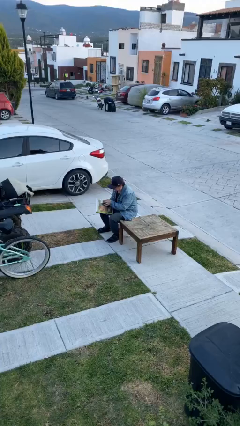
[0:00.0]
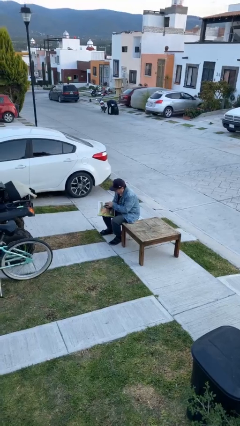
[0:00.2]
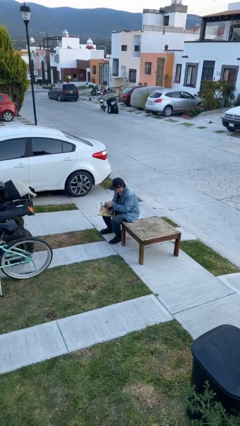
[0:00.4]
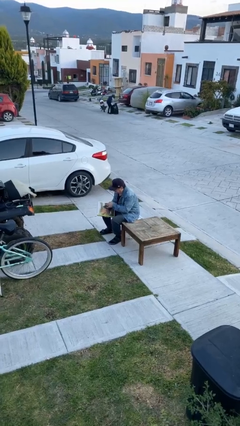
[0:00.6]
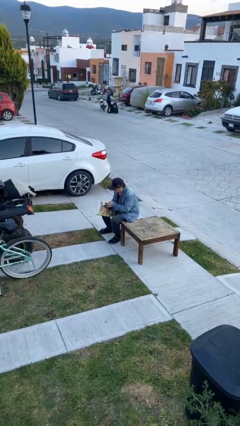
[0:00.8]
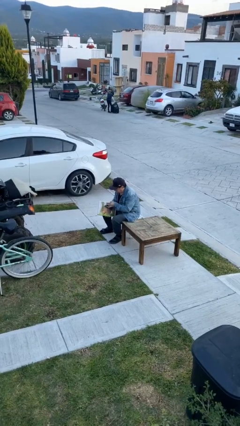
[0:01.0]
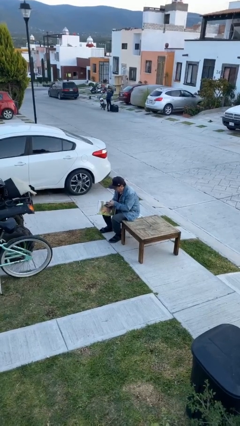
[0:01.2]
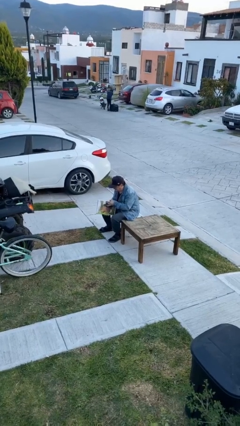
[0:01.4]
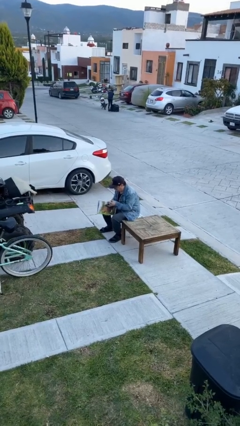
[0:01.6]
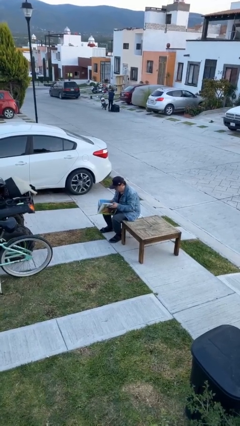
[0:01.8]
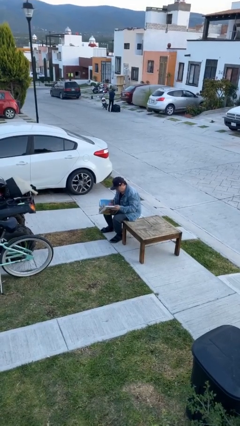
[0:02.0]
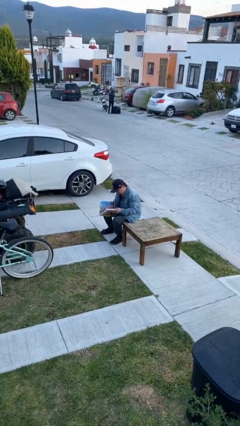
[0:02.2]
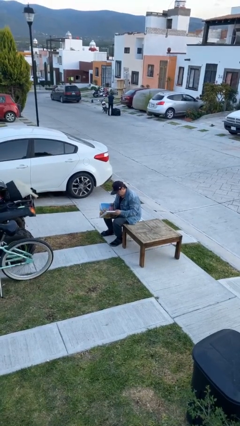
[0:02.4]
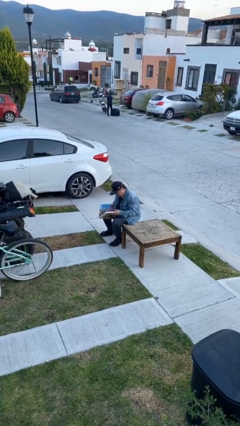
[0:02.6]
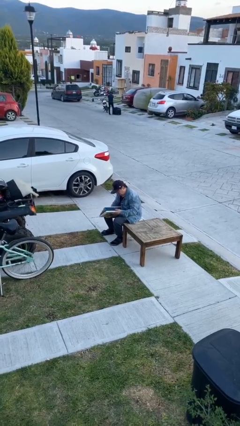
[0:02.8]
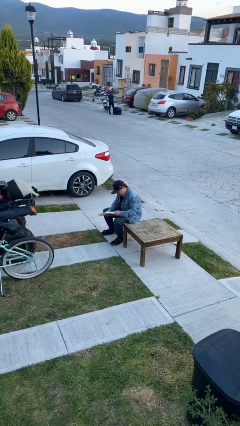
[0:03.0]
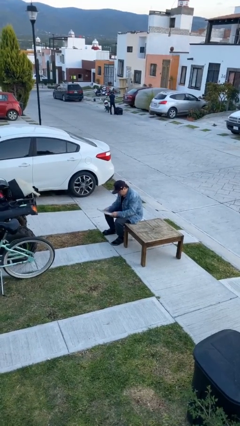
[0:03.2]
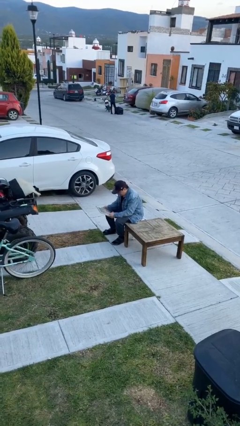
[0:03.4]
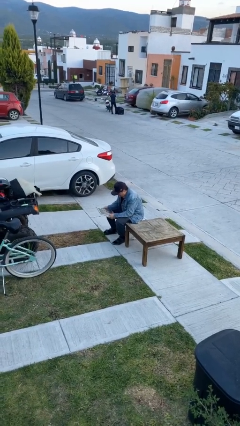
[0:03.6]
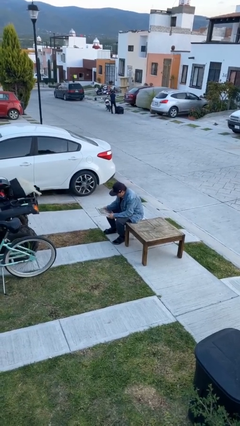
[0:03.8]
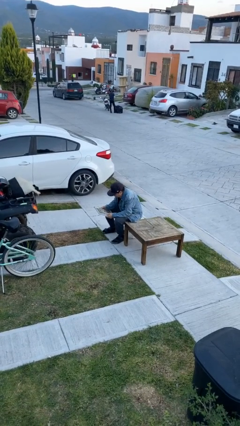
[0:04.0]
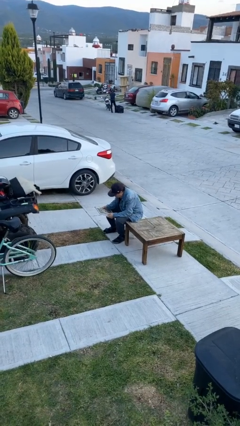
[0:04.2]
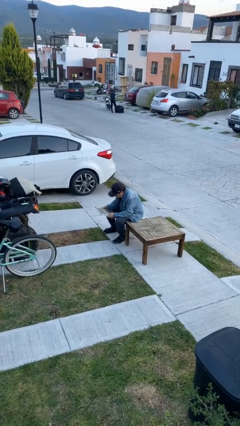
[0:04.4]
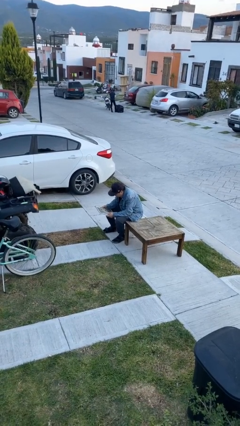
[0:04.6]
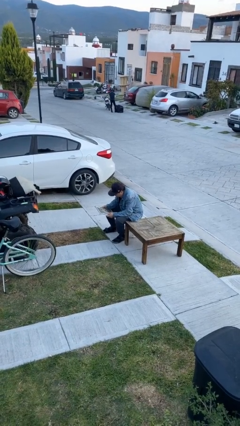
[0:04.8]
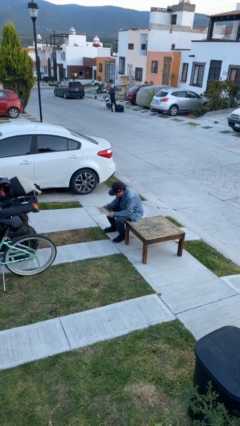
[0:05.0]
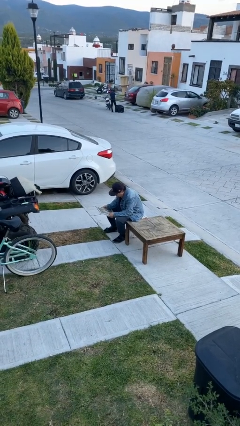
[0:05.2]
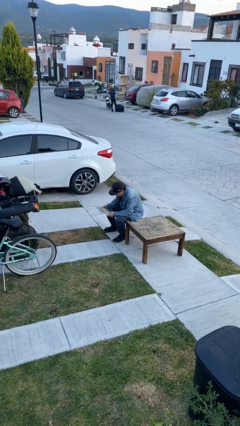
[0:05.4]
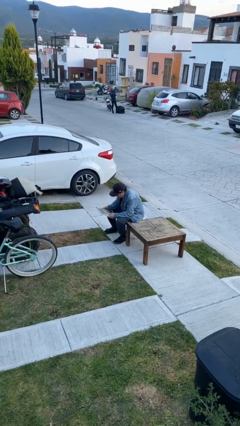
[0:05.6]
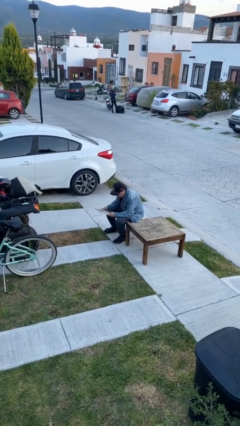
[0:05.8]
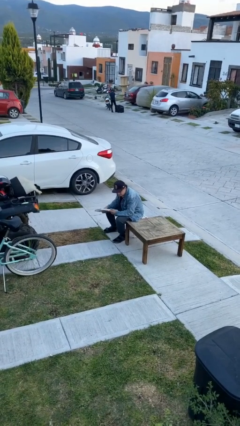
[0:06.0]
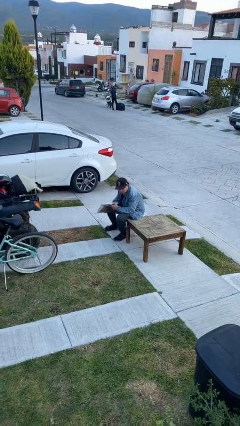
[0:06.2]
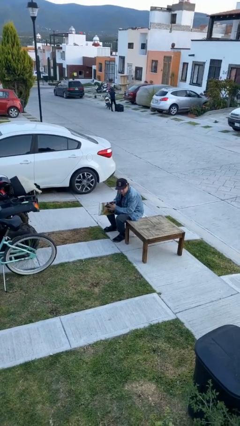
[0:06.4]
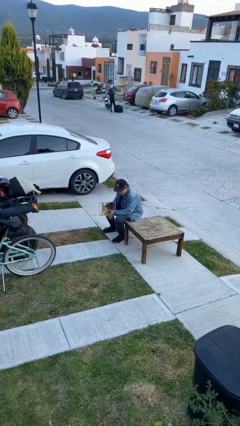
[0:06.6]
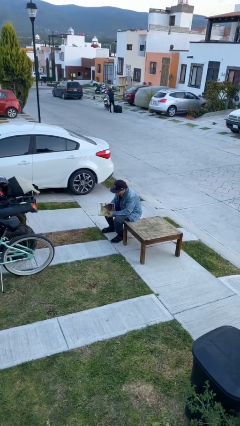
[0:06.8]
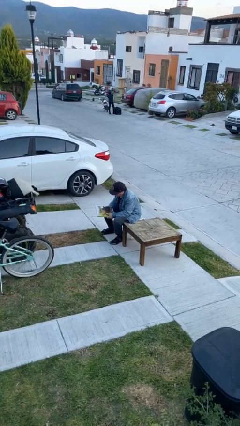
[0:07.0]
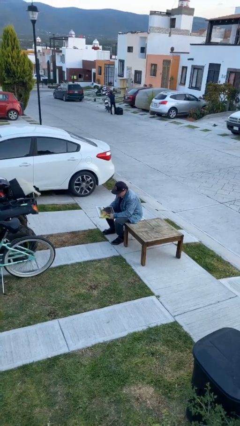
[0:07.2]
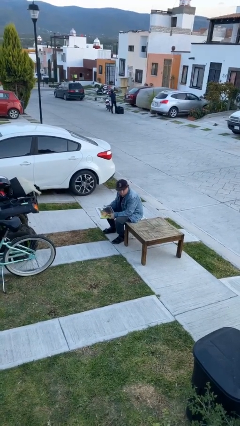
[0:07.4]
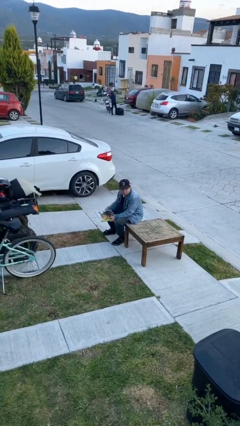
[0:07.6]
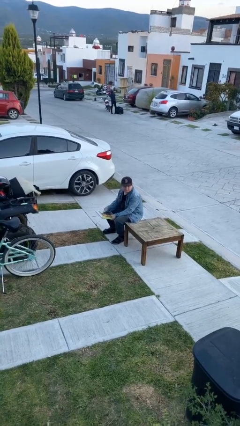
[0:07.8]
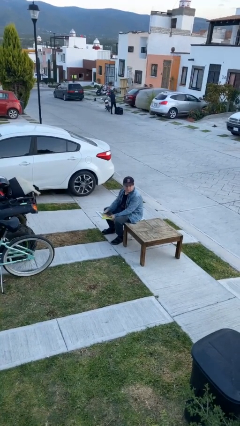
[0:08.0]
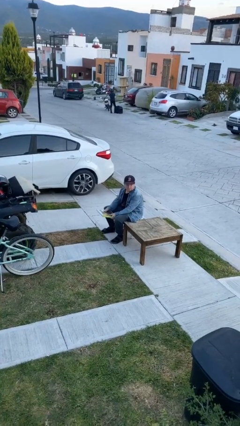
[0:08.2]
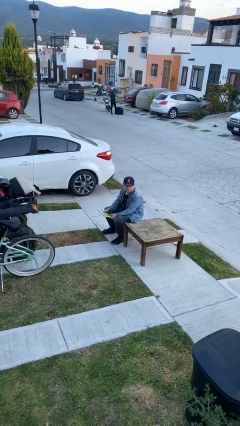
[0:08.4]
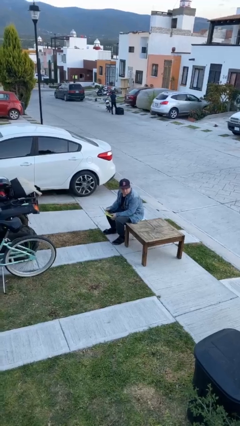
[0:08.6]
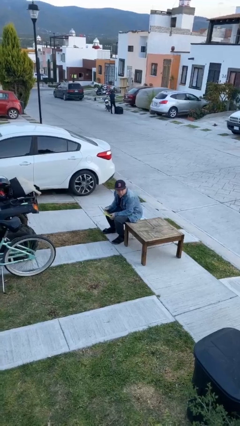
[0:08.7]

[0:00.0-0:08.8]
person reads document

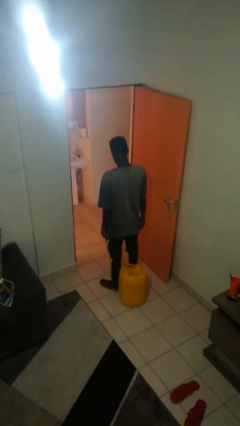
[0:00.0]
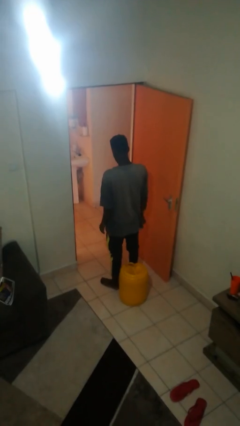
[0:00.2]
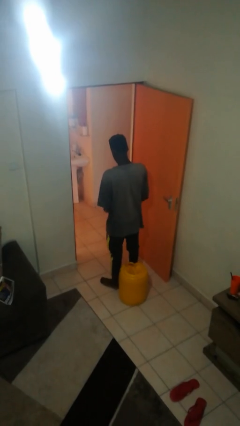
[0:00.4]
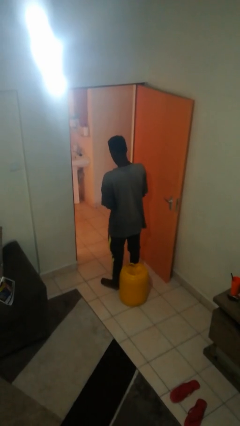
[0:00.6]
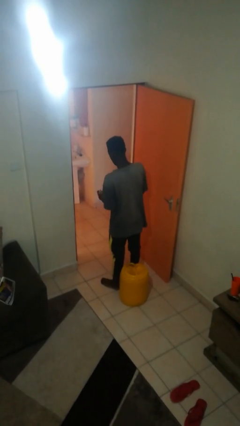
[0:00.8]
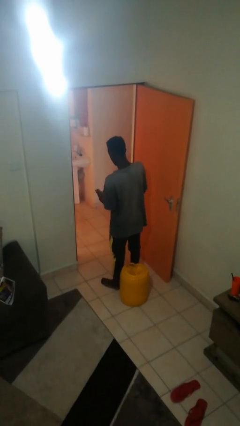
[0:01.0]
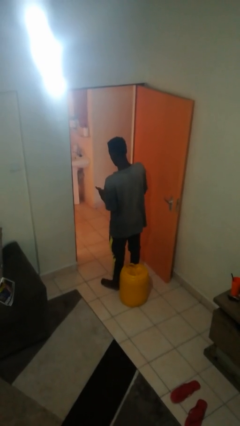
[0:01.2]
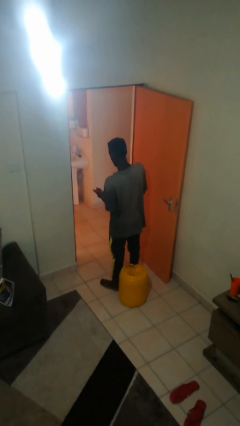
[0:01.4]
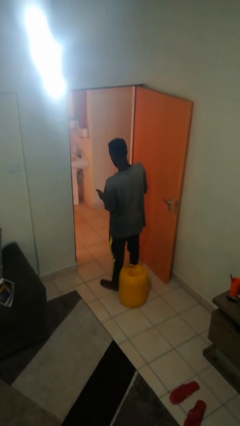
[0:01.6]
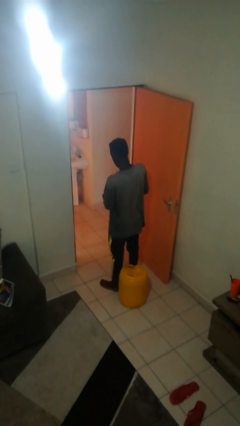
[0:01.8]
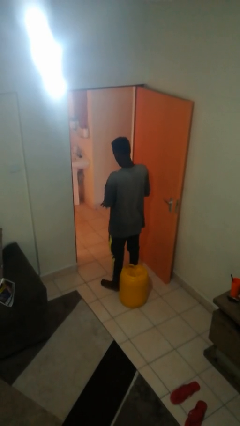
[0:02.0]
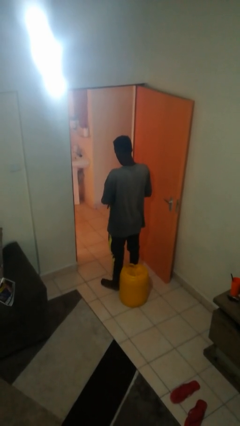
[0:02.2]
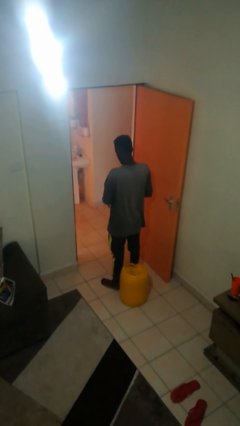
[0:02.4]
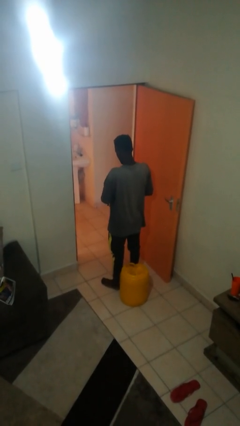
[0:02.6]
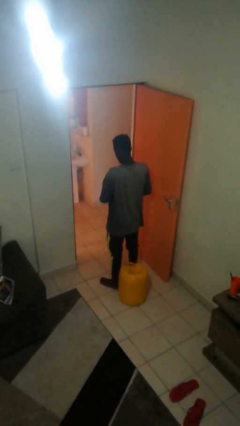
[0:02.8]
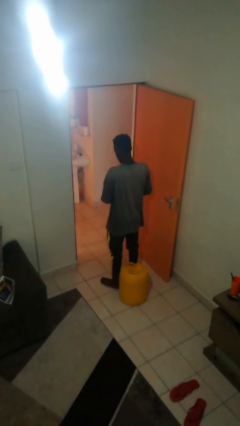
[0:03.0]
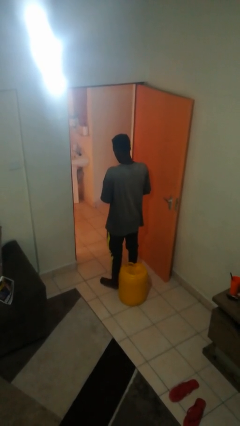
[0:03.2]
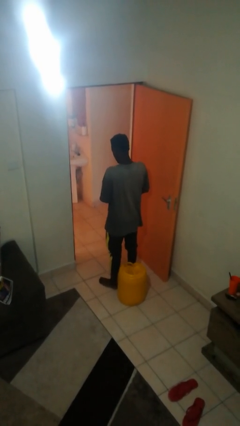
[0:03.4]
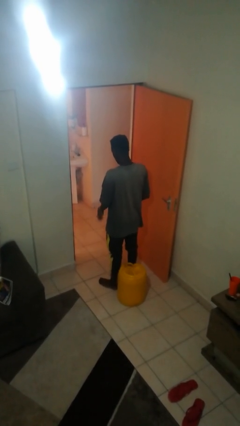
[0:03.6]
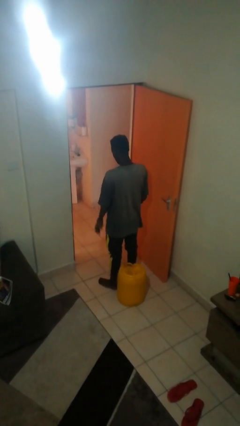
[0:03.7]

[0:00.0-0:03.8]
person puts on wristwatch

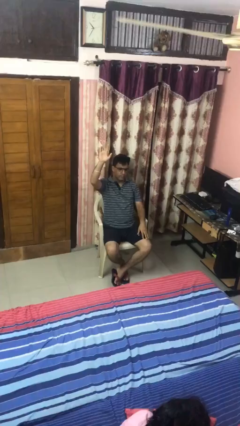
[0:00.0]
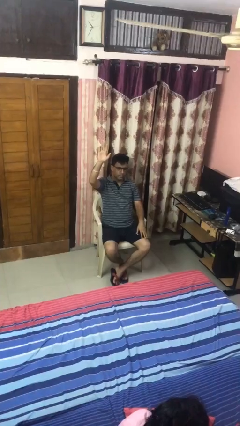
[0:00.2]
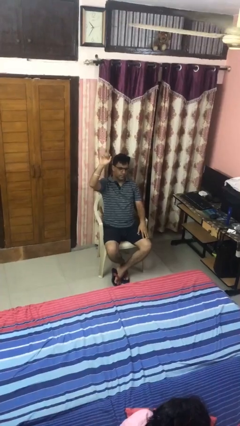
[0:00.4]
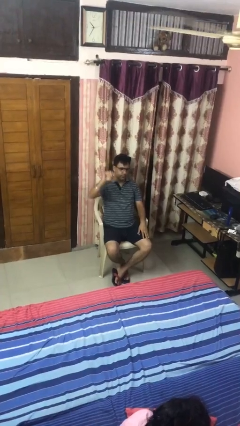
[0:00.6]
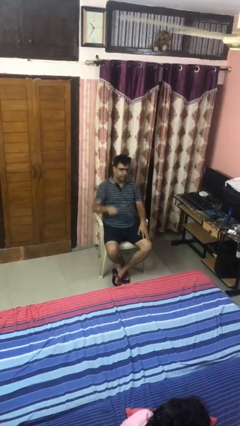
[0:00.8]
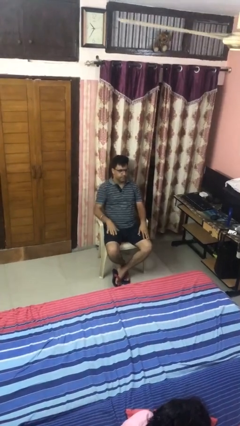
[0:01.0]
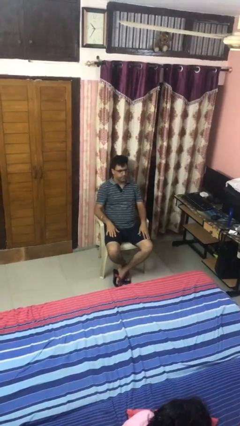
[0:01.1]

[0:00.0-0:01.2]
person gestures lower hand

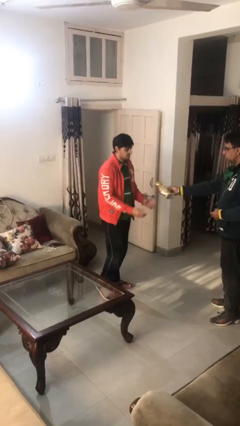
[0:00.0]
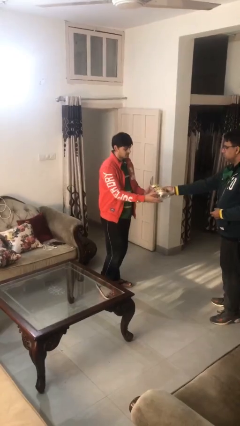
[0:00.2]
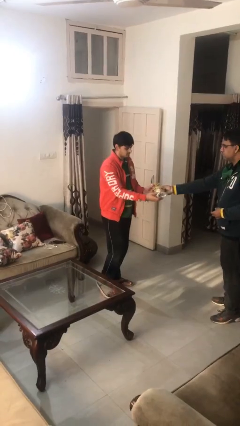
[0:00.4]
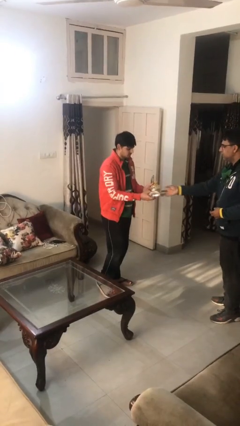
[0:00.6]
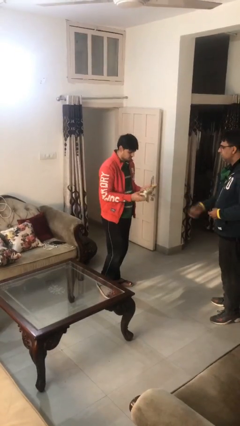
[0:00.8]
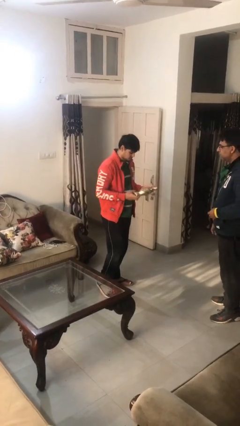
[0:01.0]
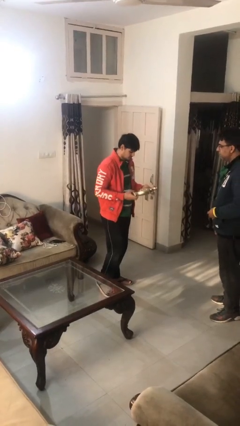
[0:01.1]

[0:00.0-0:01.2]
person transfers object to person

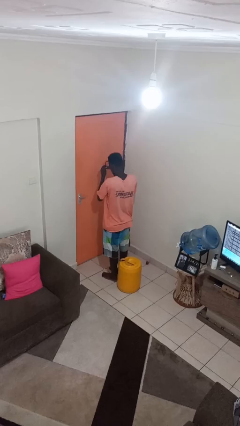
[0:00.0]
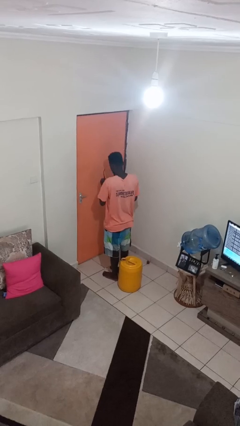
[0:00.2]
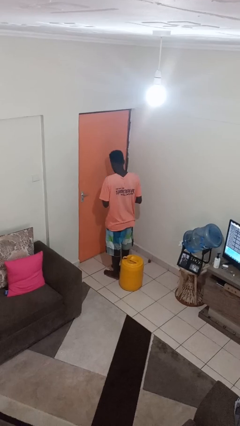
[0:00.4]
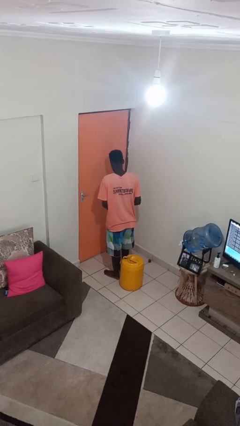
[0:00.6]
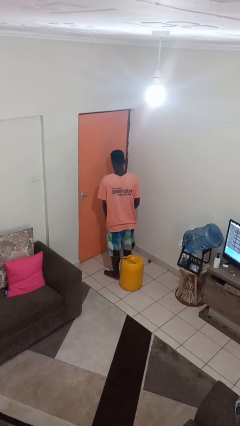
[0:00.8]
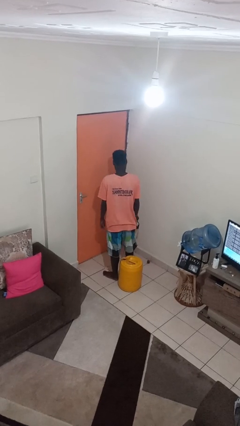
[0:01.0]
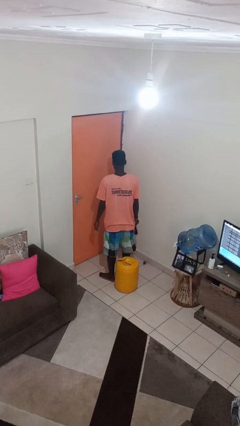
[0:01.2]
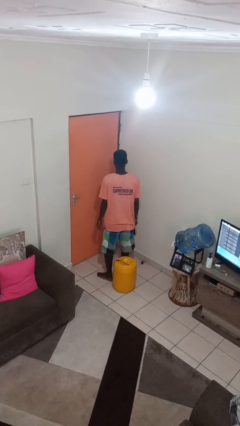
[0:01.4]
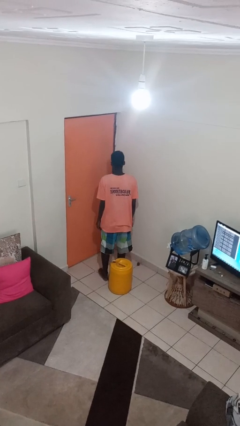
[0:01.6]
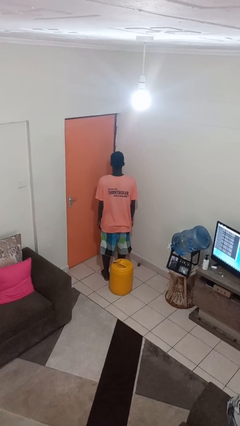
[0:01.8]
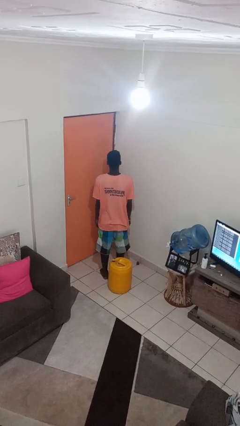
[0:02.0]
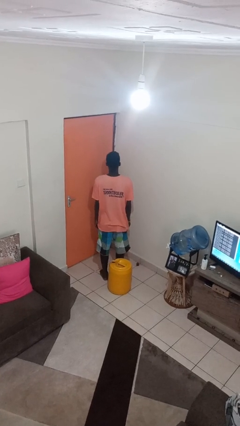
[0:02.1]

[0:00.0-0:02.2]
person takes off sunglasses

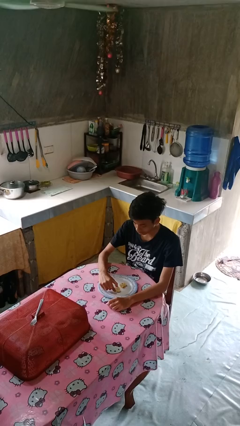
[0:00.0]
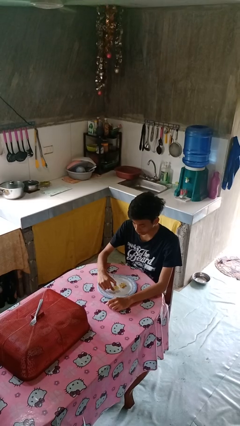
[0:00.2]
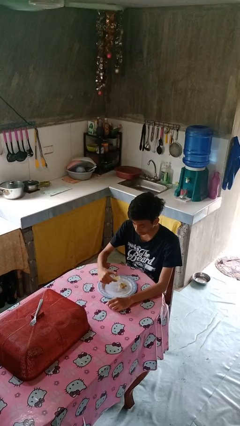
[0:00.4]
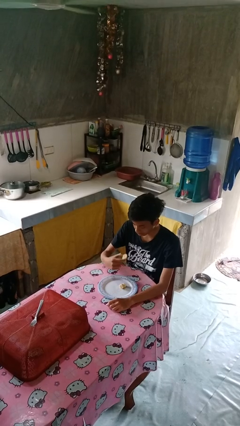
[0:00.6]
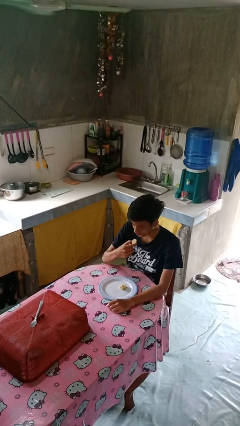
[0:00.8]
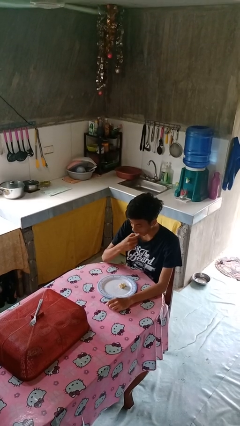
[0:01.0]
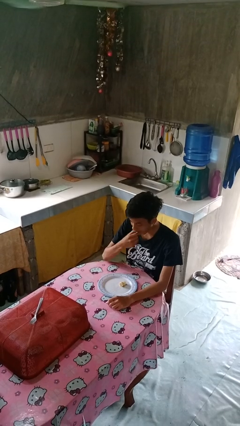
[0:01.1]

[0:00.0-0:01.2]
person eats with hands
